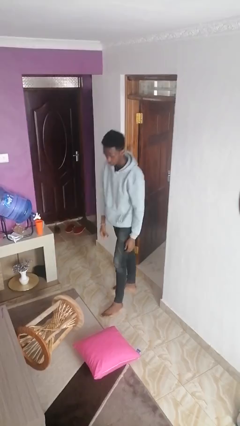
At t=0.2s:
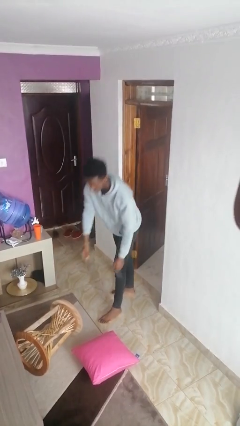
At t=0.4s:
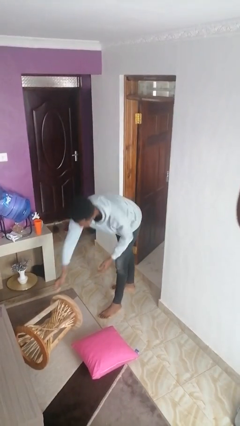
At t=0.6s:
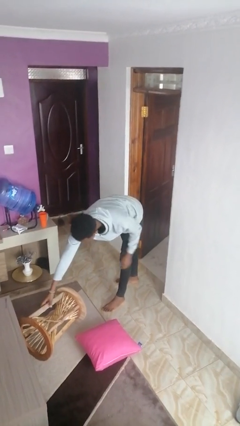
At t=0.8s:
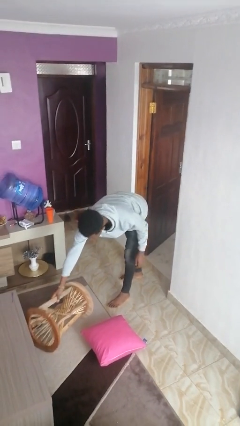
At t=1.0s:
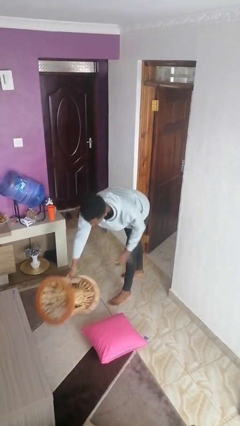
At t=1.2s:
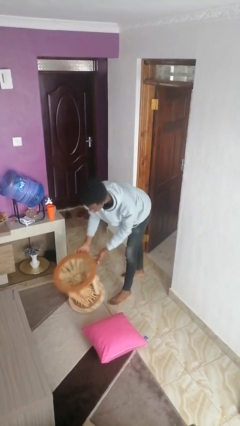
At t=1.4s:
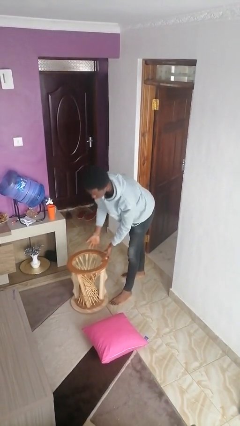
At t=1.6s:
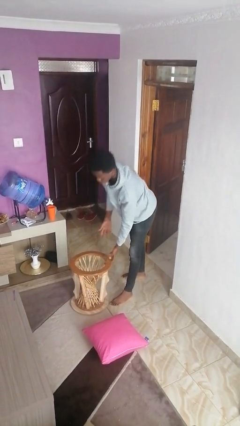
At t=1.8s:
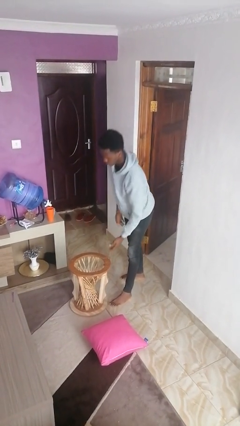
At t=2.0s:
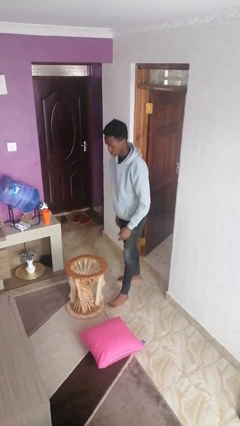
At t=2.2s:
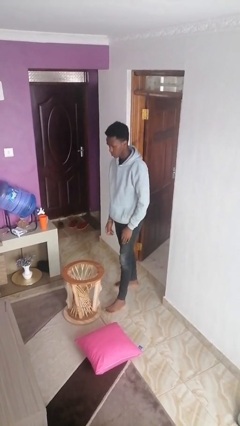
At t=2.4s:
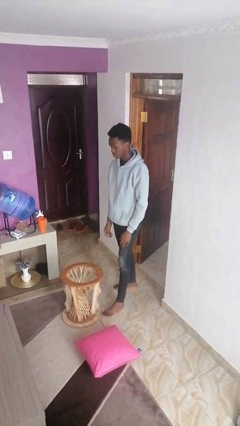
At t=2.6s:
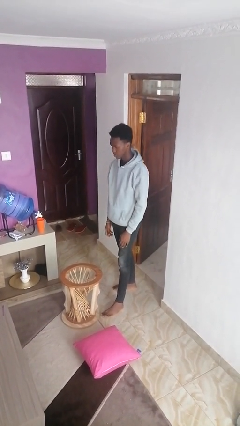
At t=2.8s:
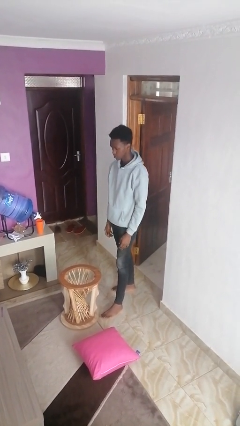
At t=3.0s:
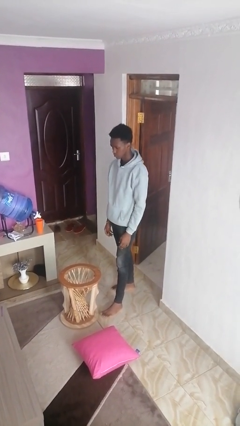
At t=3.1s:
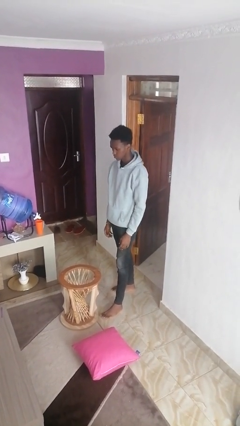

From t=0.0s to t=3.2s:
person sets upright furniture

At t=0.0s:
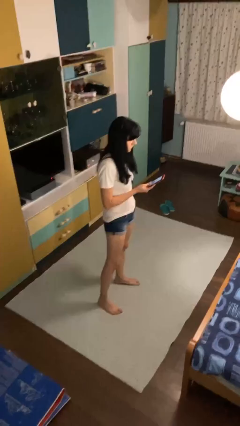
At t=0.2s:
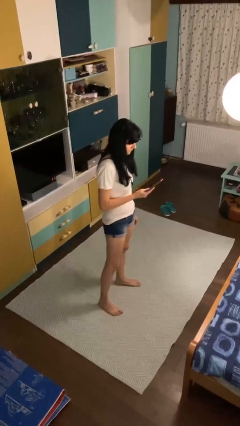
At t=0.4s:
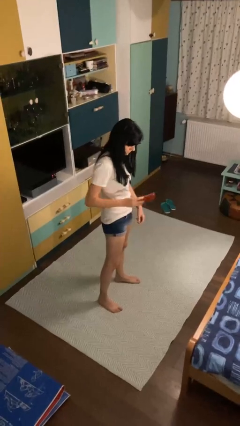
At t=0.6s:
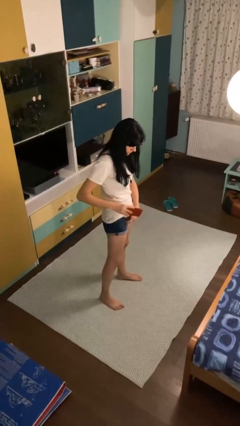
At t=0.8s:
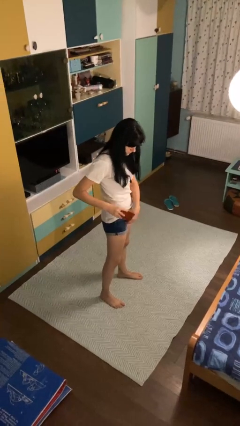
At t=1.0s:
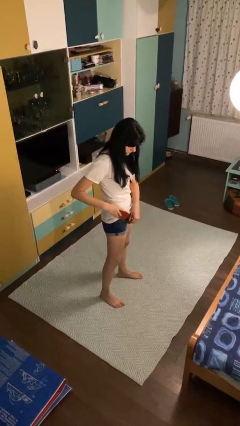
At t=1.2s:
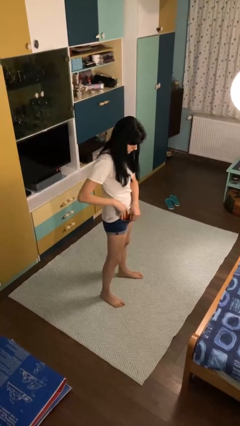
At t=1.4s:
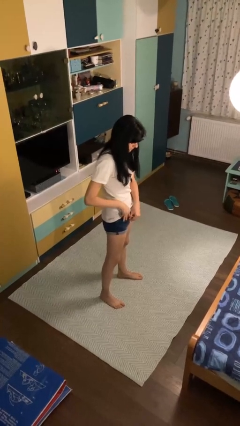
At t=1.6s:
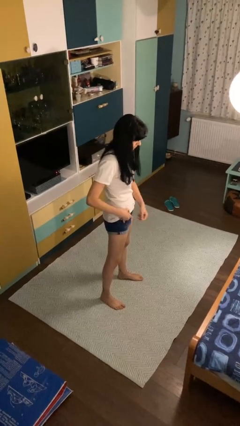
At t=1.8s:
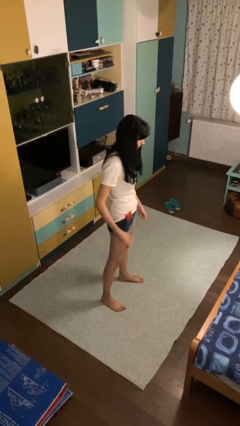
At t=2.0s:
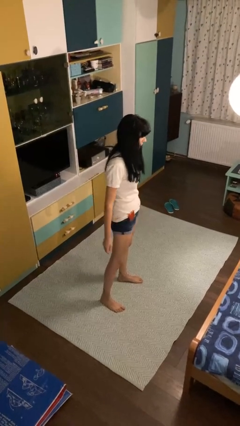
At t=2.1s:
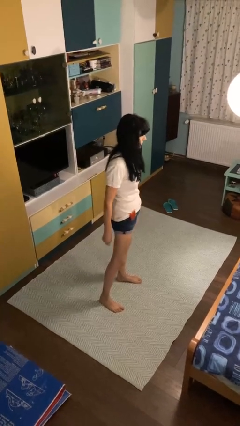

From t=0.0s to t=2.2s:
person puts phone into pocket

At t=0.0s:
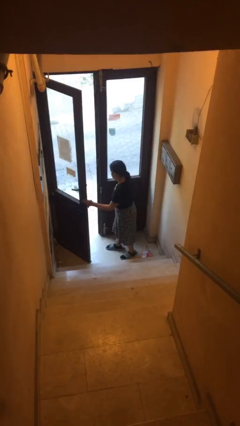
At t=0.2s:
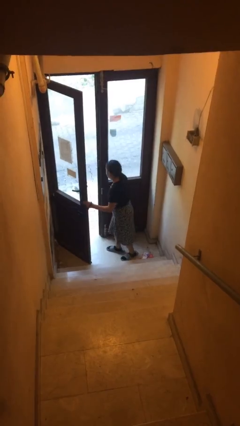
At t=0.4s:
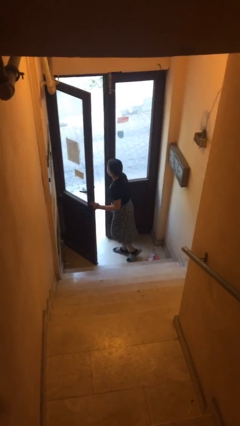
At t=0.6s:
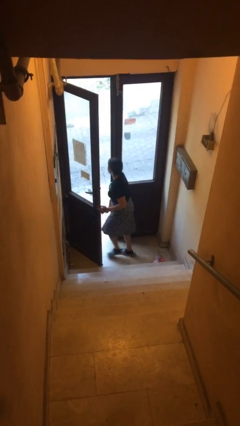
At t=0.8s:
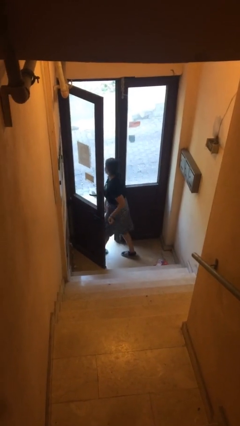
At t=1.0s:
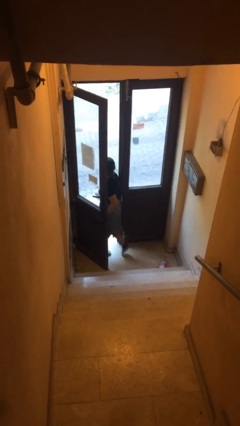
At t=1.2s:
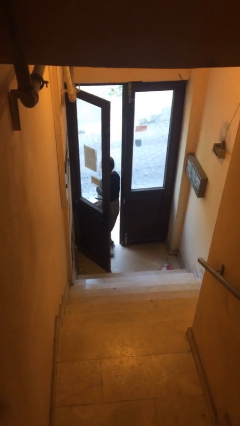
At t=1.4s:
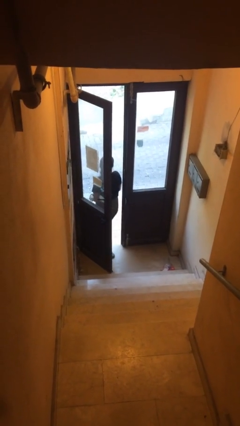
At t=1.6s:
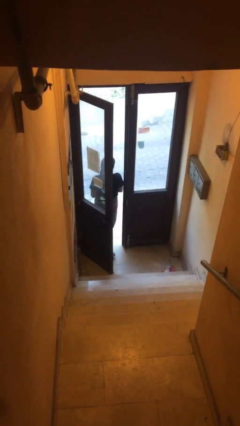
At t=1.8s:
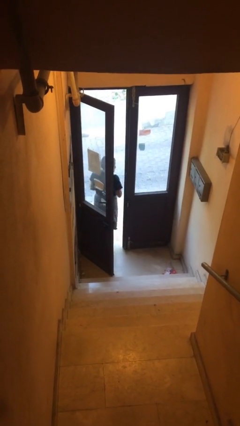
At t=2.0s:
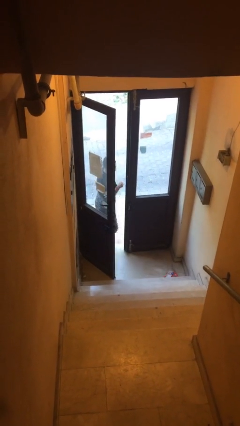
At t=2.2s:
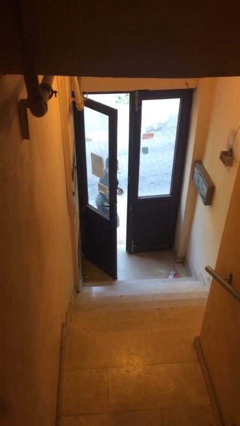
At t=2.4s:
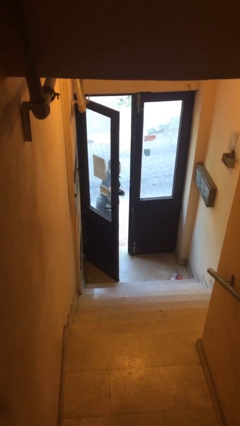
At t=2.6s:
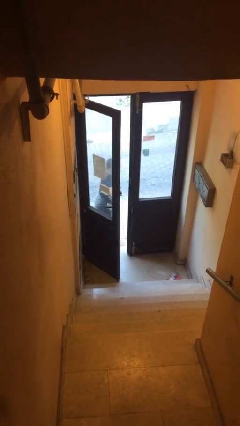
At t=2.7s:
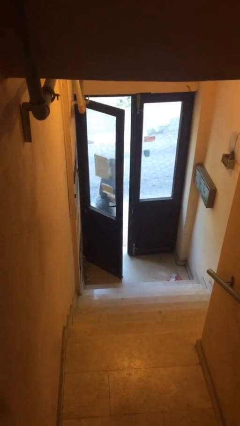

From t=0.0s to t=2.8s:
person exits scene through structure

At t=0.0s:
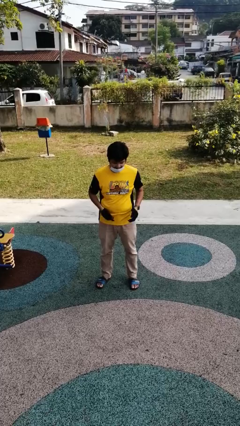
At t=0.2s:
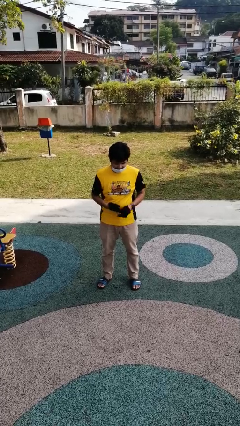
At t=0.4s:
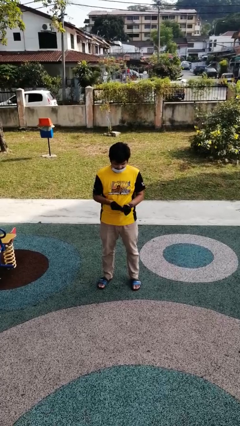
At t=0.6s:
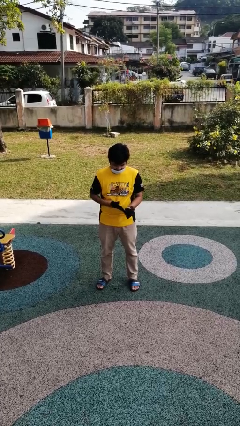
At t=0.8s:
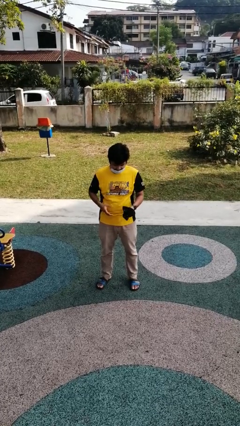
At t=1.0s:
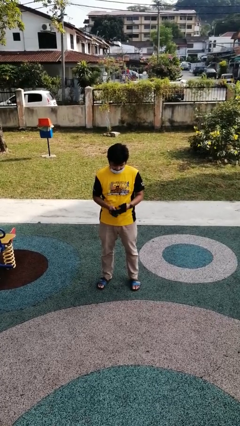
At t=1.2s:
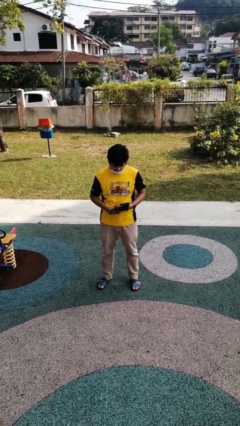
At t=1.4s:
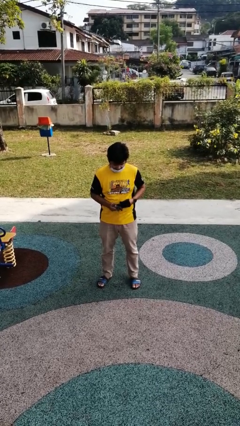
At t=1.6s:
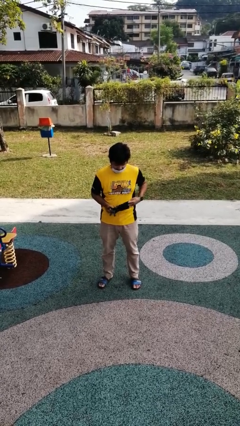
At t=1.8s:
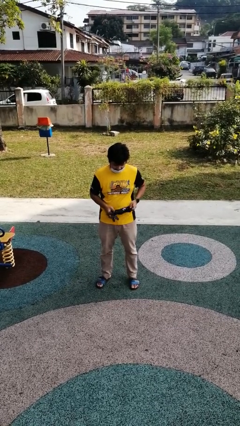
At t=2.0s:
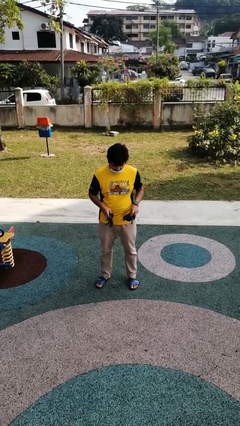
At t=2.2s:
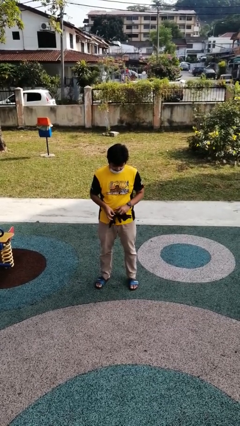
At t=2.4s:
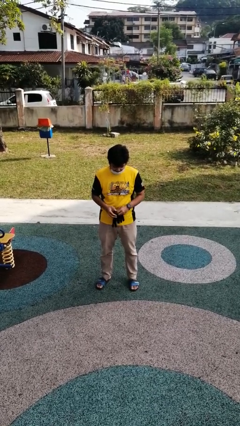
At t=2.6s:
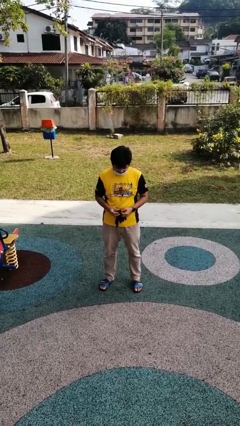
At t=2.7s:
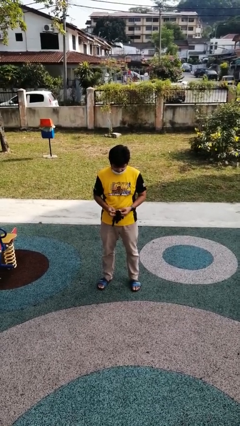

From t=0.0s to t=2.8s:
person takes off gloves

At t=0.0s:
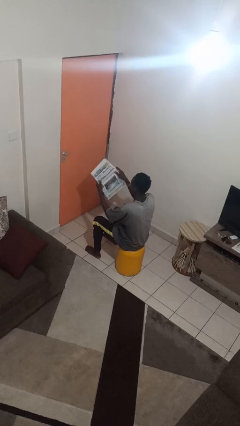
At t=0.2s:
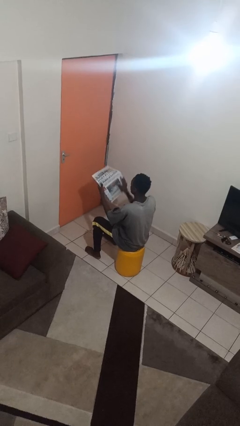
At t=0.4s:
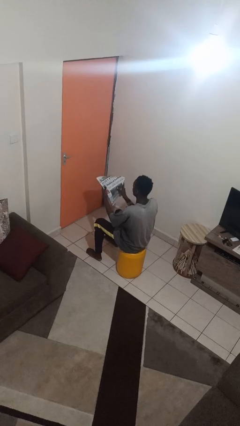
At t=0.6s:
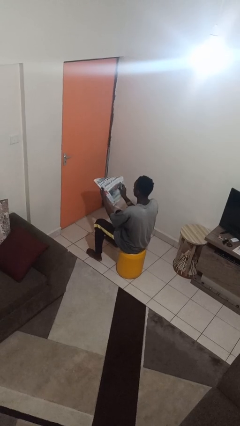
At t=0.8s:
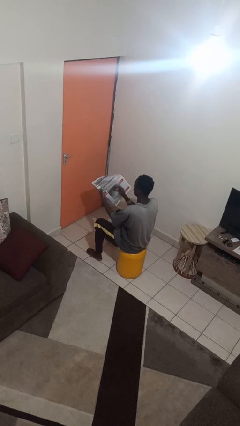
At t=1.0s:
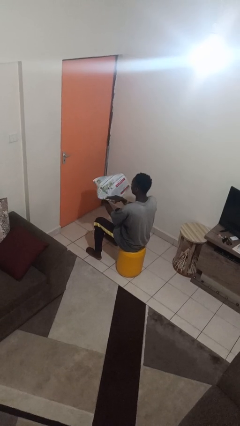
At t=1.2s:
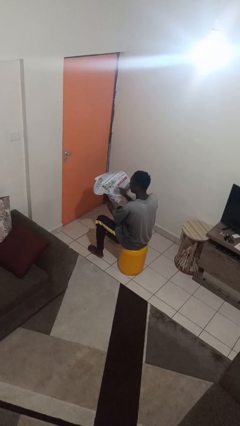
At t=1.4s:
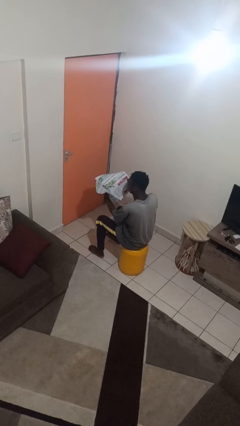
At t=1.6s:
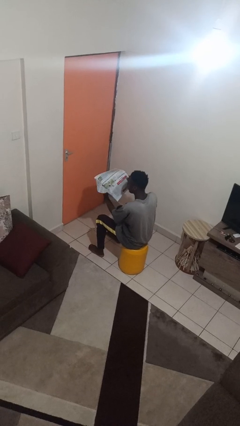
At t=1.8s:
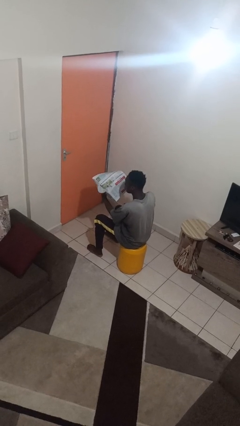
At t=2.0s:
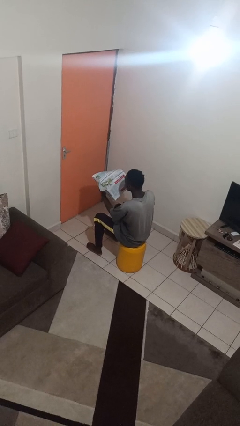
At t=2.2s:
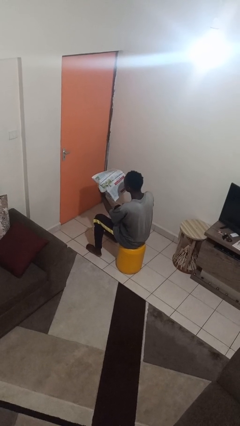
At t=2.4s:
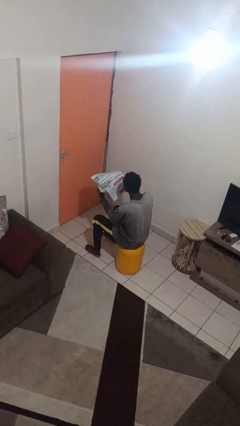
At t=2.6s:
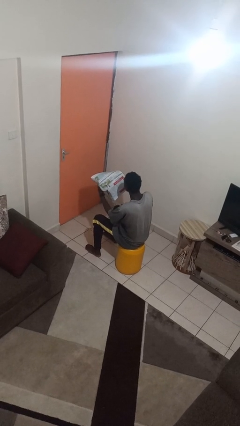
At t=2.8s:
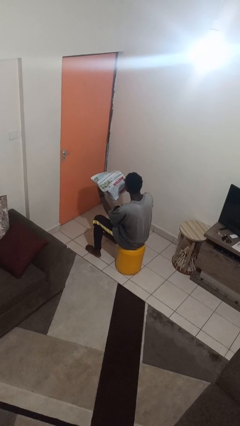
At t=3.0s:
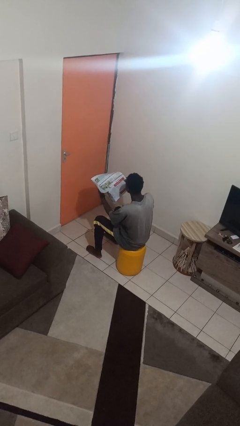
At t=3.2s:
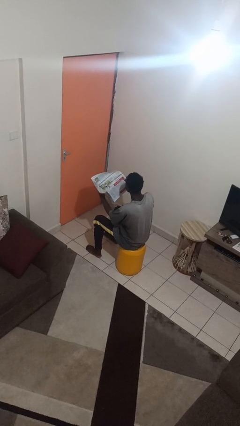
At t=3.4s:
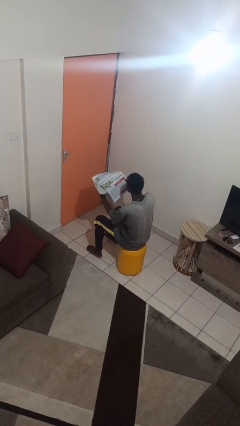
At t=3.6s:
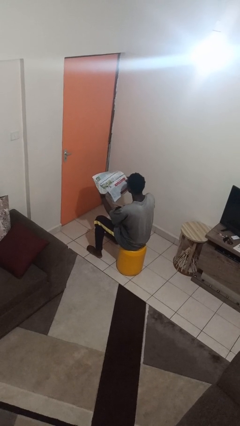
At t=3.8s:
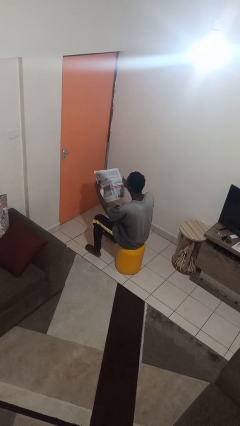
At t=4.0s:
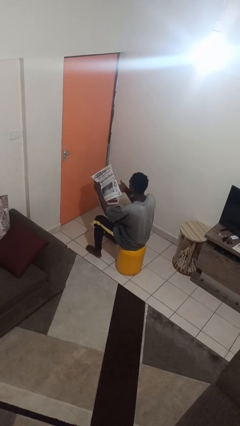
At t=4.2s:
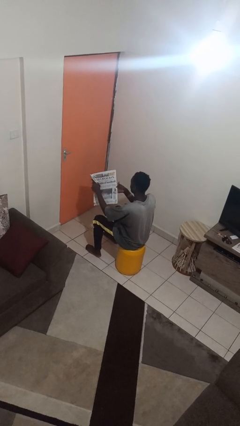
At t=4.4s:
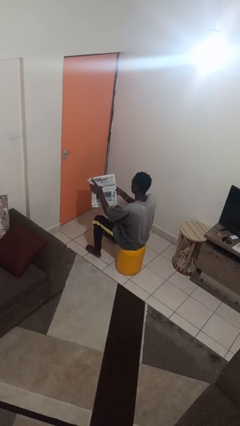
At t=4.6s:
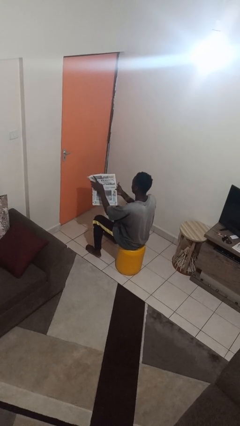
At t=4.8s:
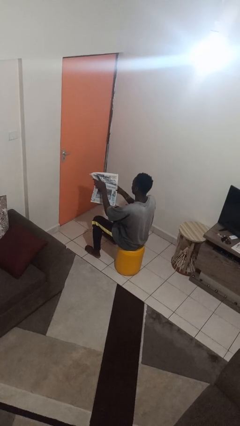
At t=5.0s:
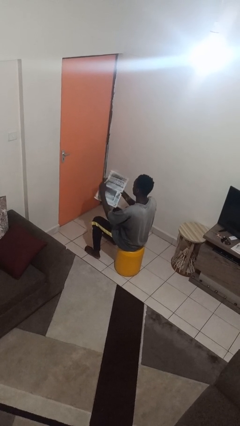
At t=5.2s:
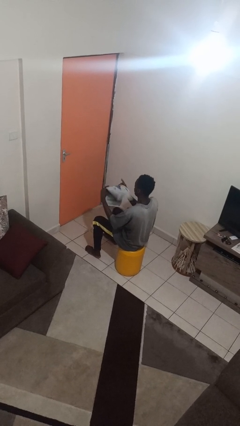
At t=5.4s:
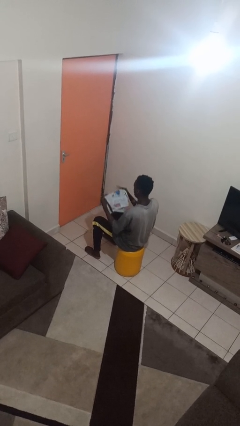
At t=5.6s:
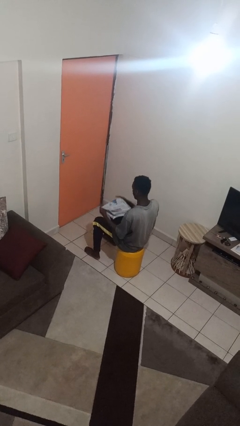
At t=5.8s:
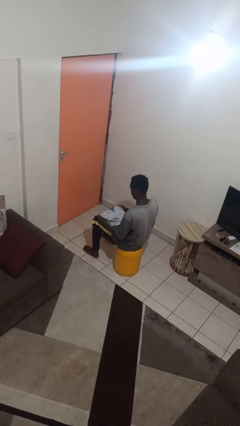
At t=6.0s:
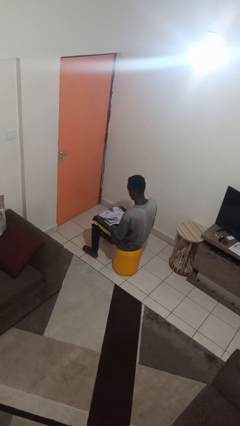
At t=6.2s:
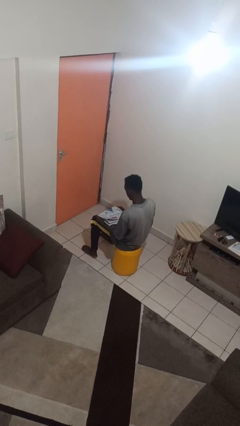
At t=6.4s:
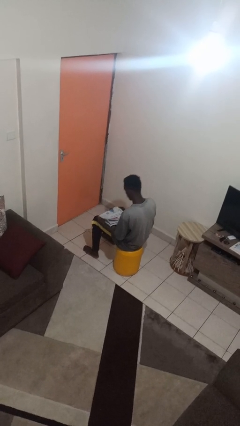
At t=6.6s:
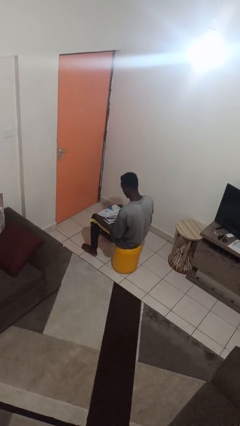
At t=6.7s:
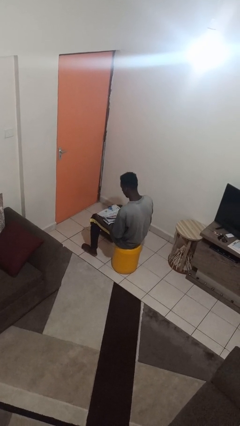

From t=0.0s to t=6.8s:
person reads newspaper
